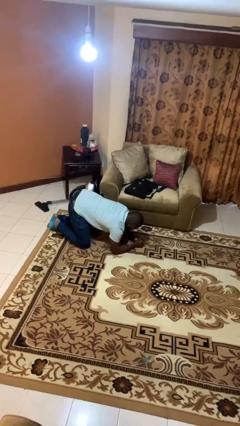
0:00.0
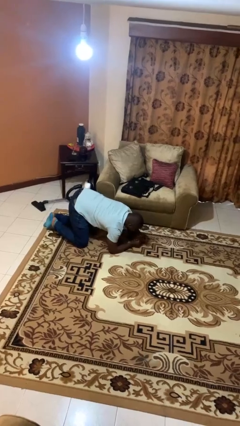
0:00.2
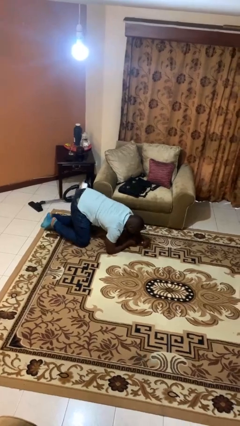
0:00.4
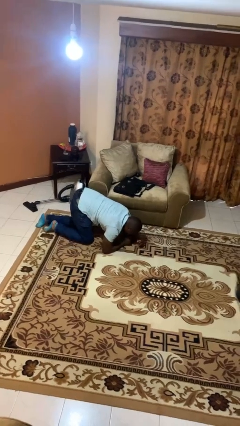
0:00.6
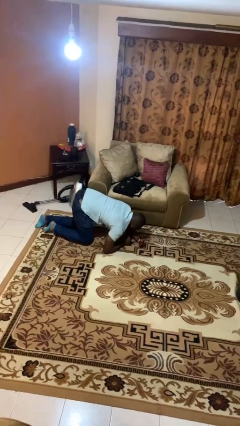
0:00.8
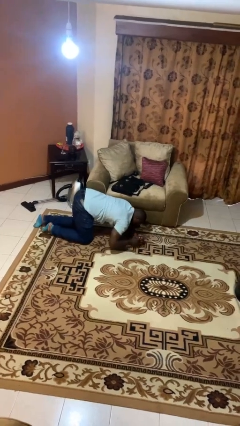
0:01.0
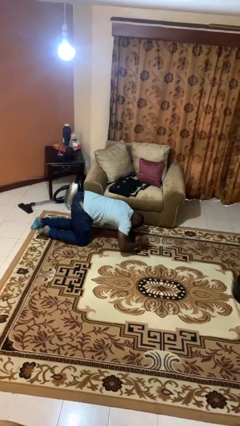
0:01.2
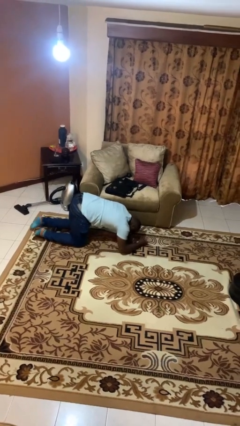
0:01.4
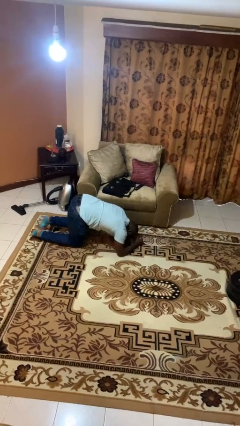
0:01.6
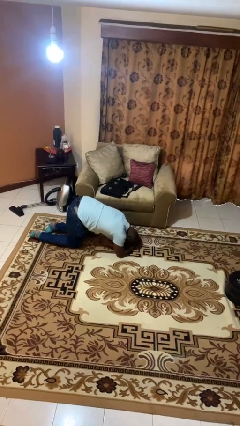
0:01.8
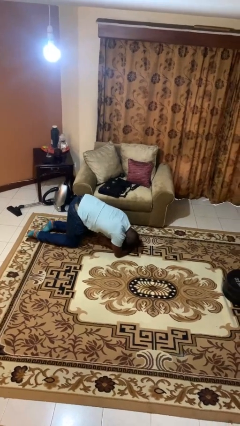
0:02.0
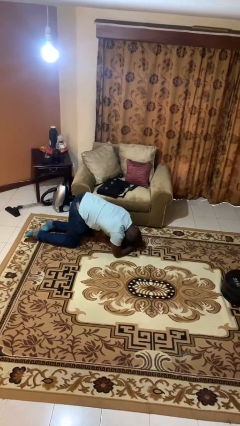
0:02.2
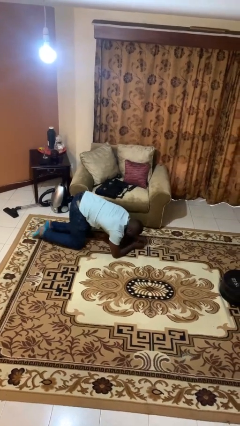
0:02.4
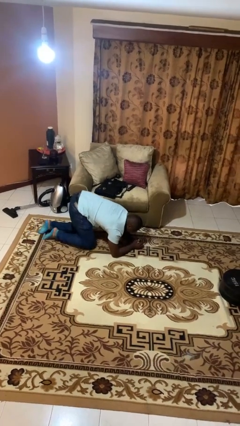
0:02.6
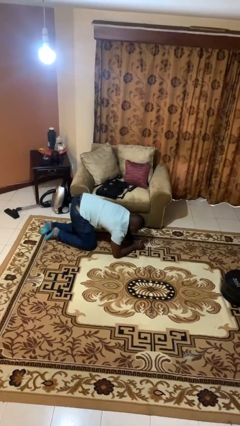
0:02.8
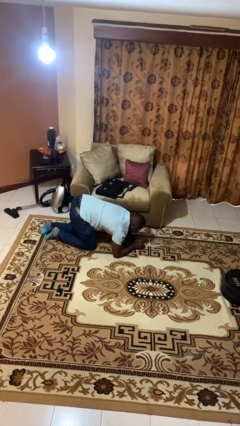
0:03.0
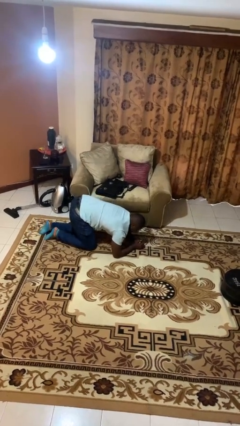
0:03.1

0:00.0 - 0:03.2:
person crawls

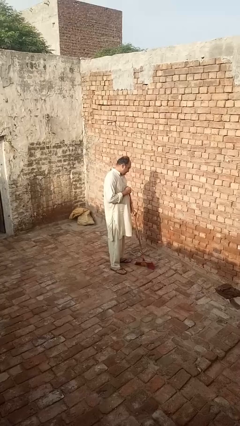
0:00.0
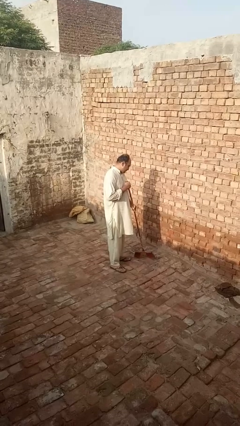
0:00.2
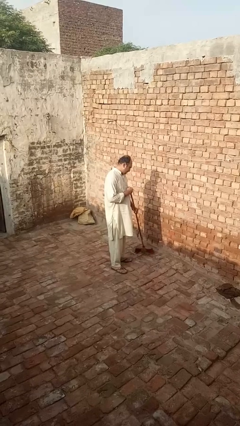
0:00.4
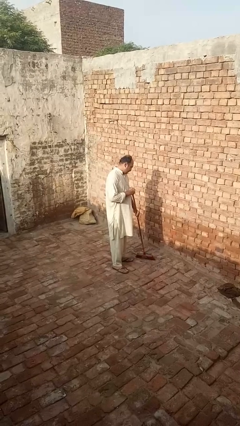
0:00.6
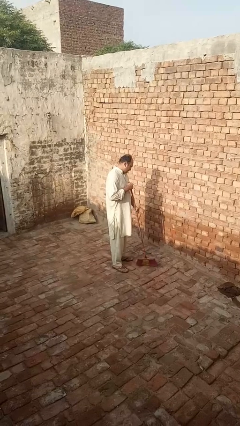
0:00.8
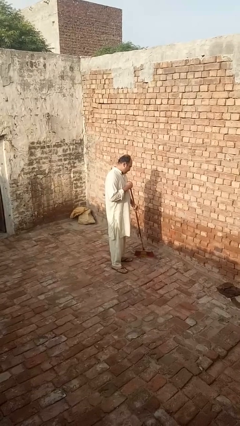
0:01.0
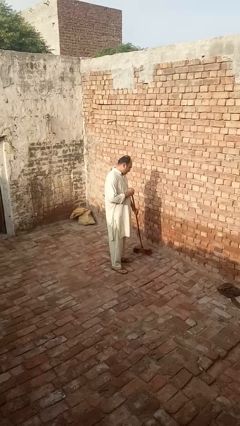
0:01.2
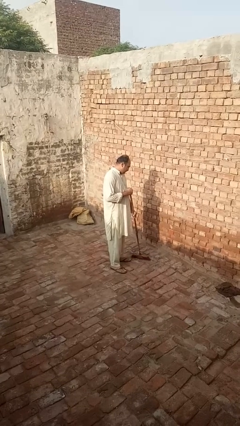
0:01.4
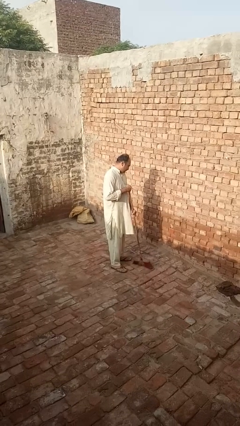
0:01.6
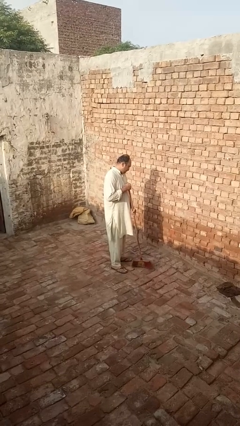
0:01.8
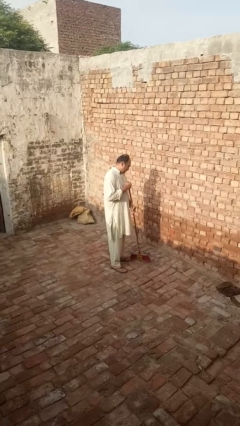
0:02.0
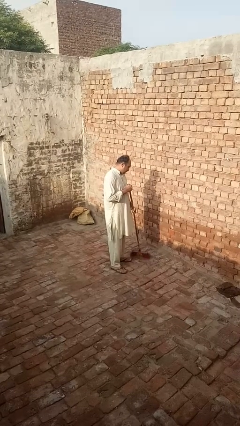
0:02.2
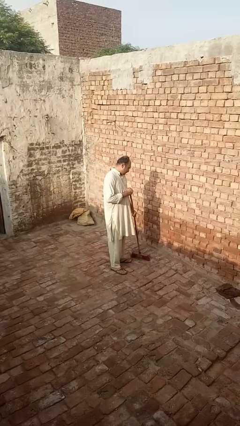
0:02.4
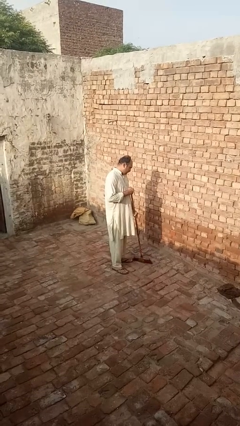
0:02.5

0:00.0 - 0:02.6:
person sweeps floor

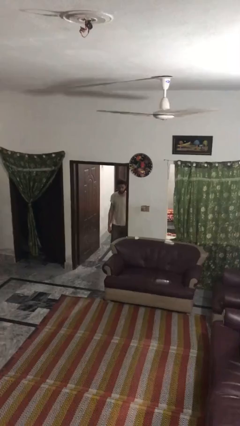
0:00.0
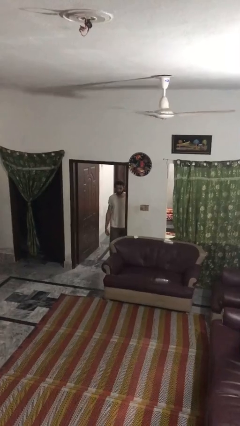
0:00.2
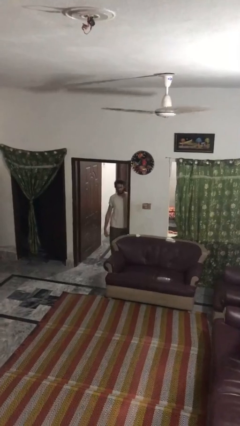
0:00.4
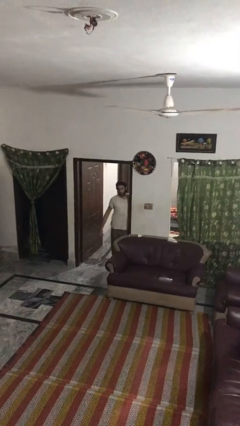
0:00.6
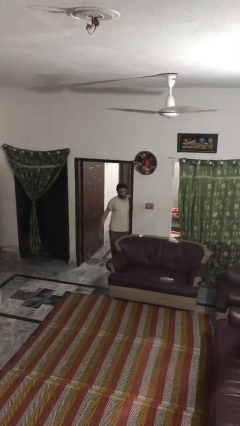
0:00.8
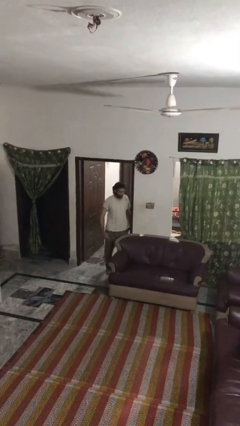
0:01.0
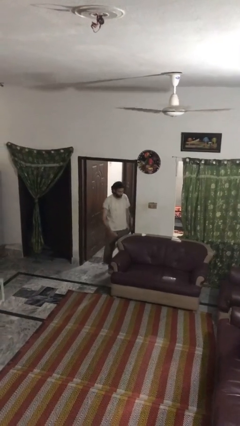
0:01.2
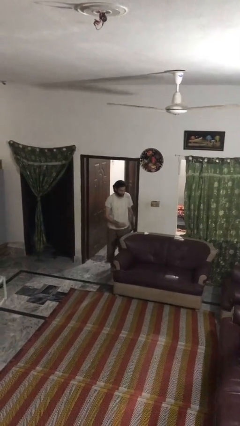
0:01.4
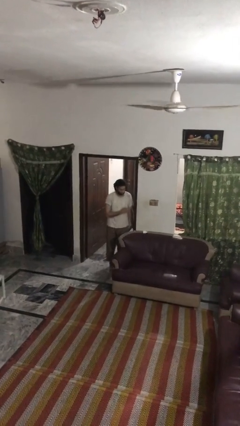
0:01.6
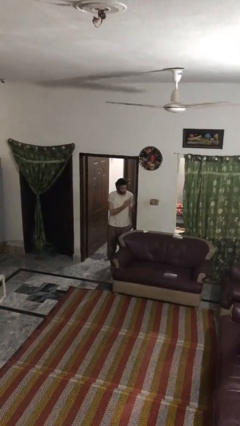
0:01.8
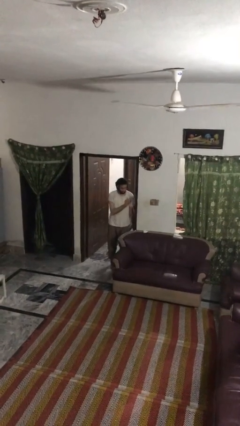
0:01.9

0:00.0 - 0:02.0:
person bumps into wall

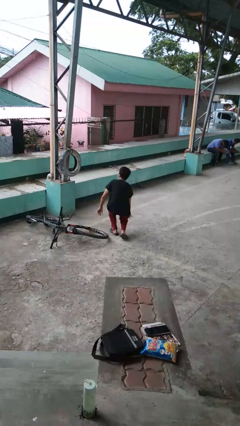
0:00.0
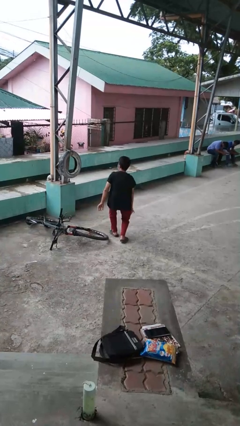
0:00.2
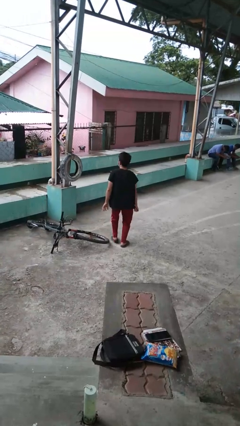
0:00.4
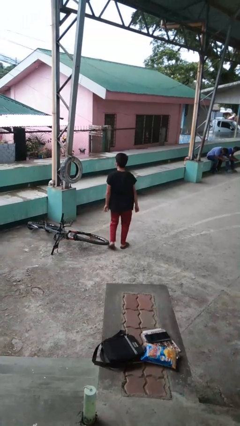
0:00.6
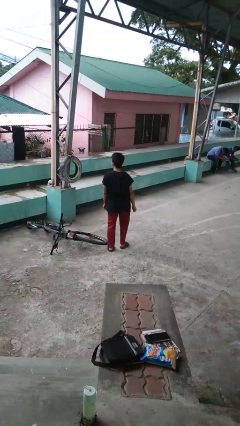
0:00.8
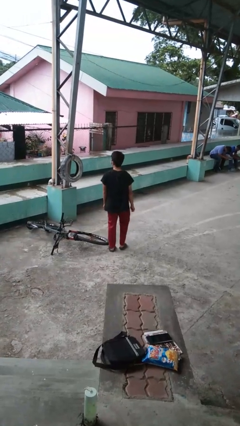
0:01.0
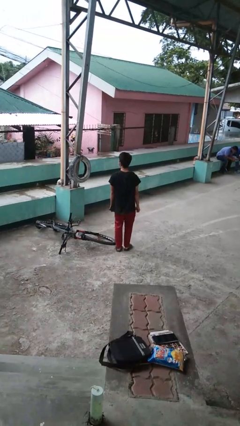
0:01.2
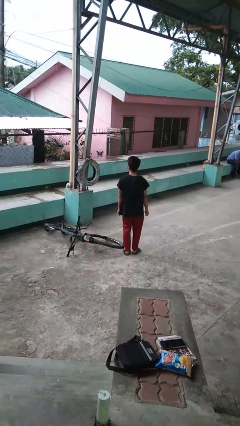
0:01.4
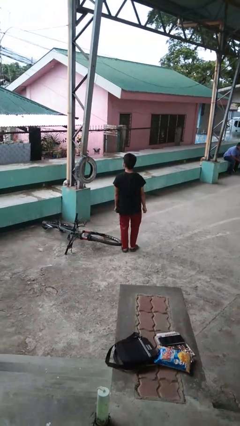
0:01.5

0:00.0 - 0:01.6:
person stands up from floor

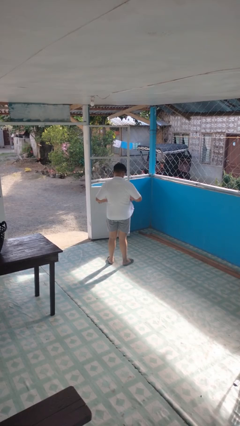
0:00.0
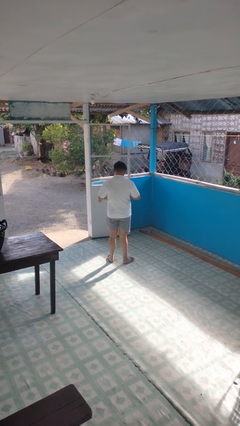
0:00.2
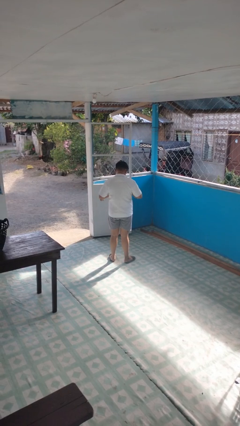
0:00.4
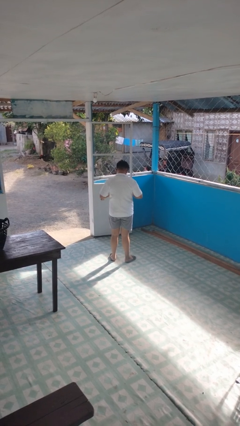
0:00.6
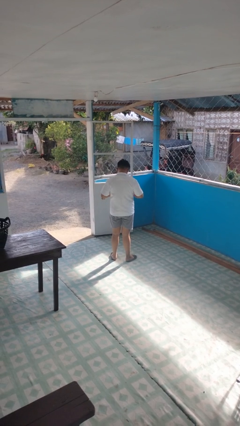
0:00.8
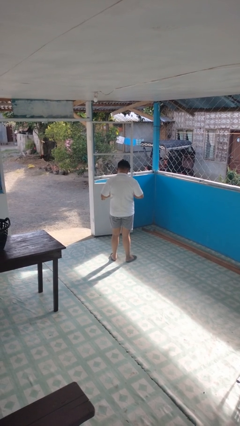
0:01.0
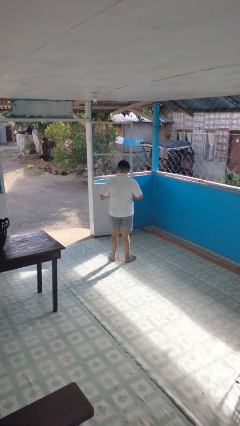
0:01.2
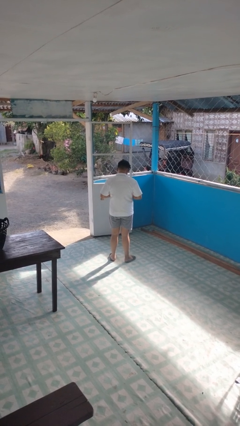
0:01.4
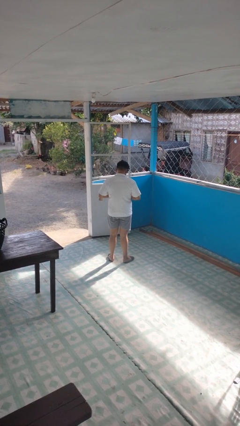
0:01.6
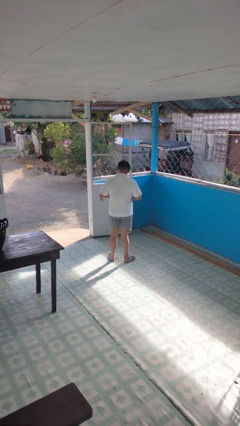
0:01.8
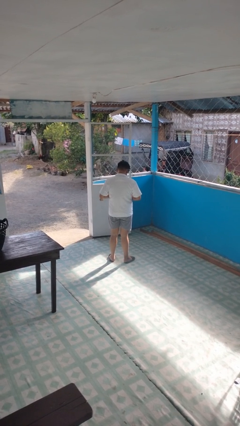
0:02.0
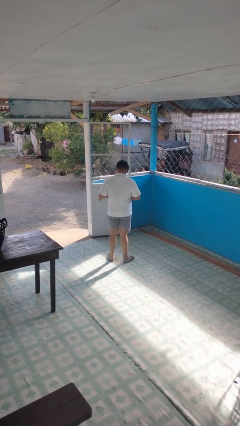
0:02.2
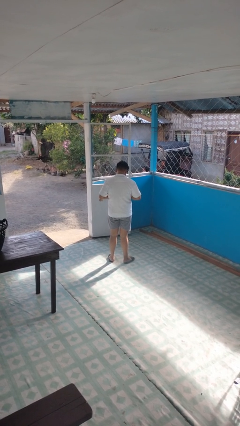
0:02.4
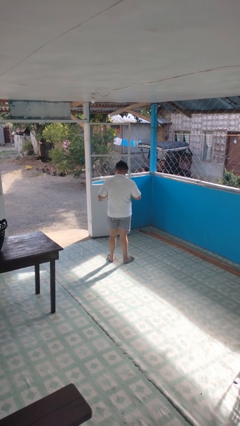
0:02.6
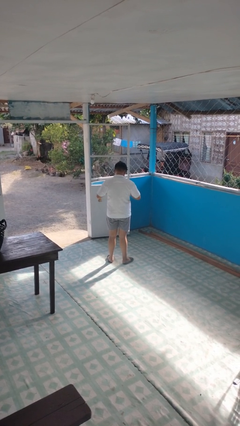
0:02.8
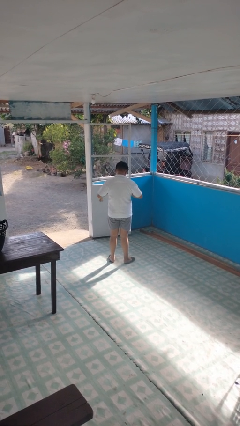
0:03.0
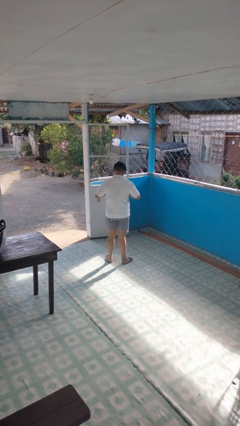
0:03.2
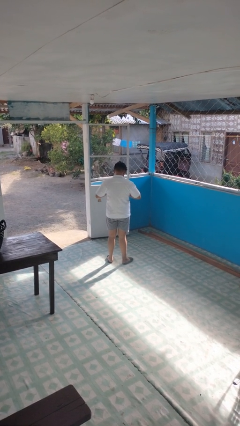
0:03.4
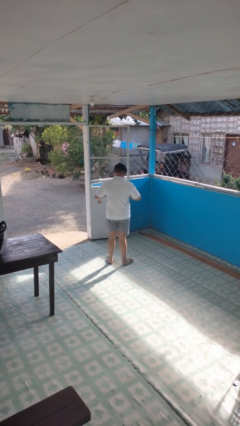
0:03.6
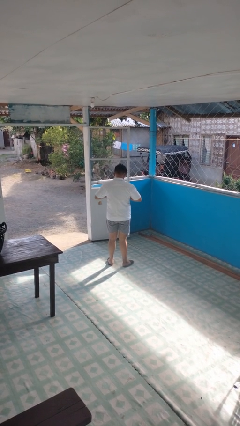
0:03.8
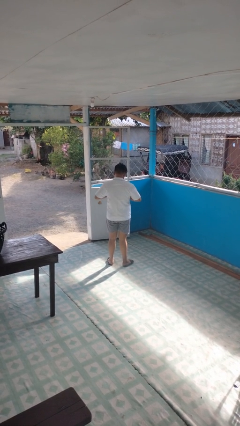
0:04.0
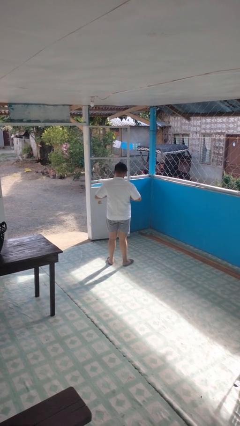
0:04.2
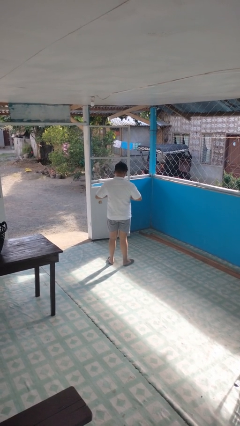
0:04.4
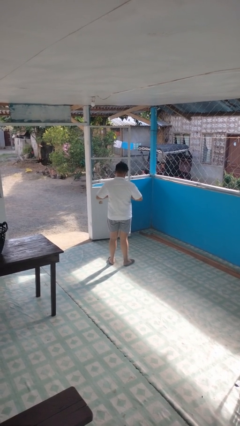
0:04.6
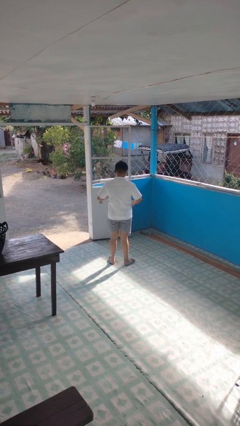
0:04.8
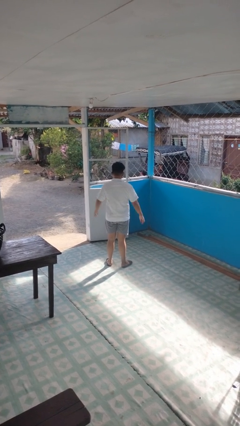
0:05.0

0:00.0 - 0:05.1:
person buttons shirt

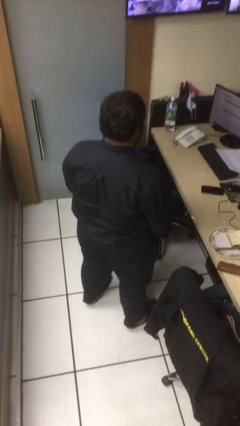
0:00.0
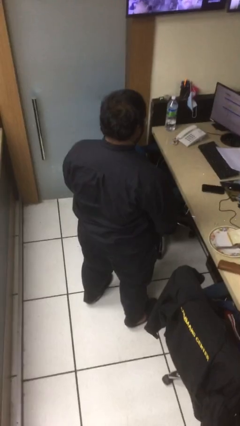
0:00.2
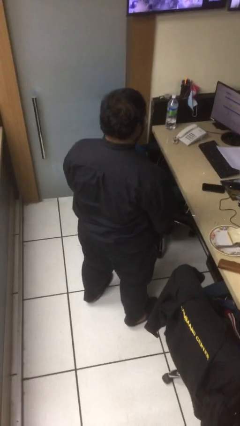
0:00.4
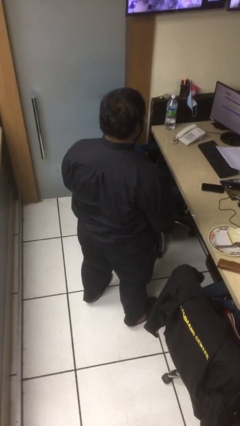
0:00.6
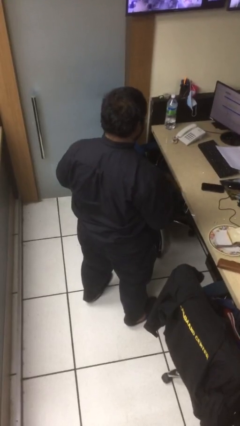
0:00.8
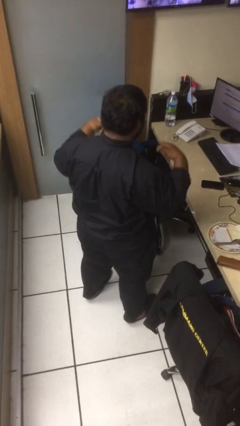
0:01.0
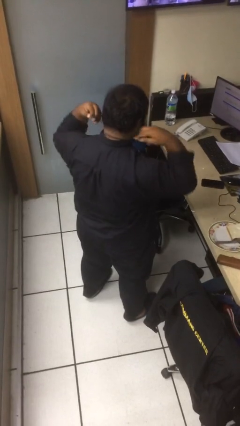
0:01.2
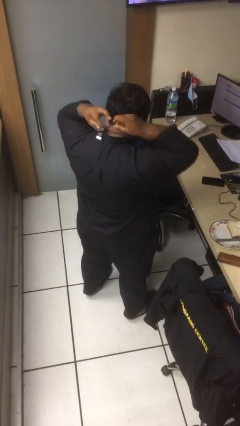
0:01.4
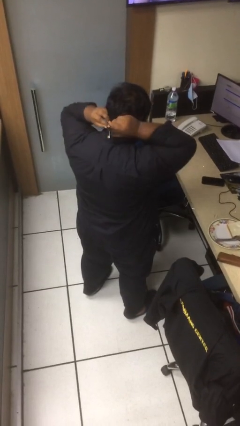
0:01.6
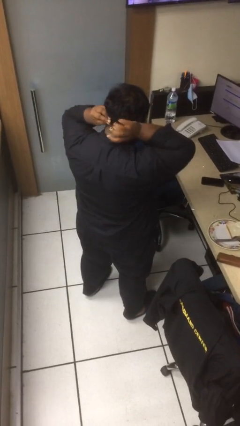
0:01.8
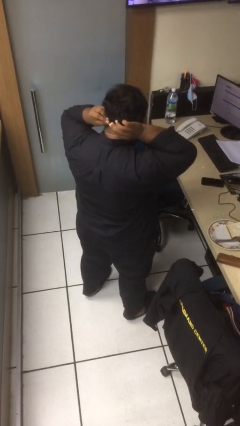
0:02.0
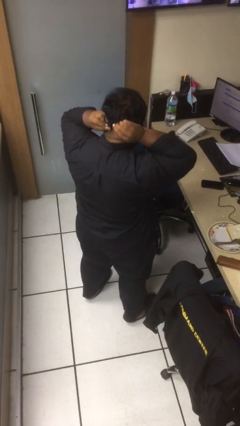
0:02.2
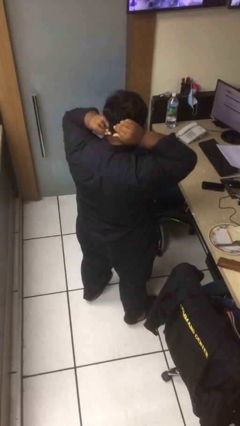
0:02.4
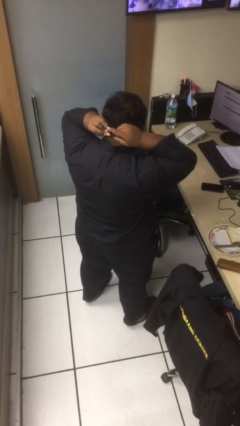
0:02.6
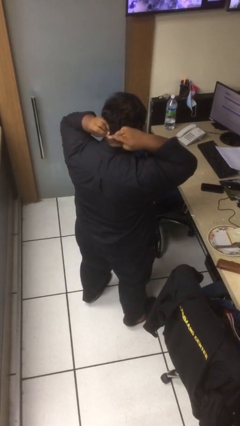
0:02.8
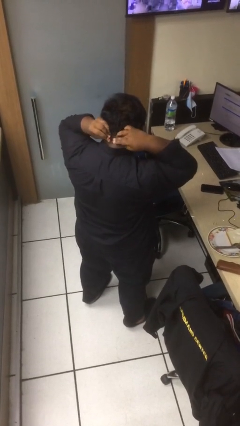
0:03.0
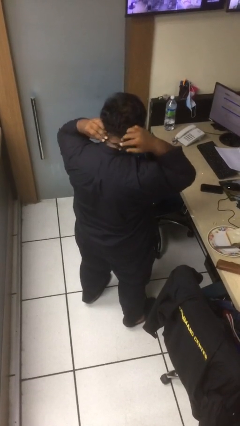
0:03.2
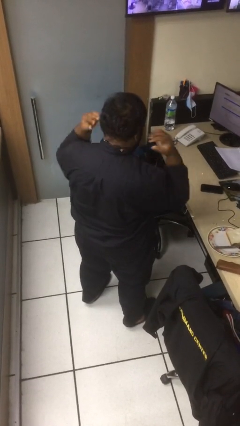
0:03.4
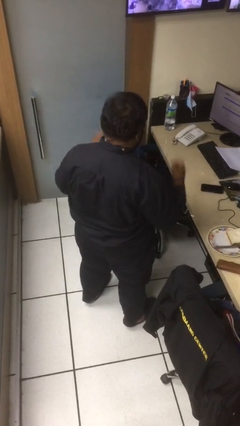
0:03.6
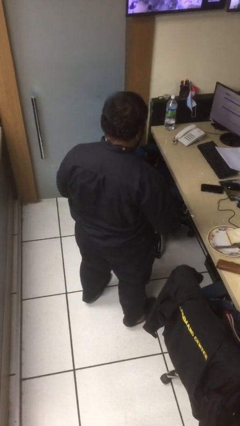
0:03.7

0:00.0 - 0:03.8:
person puts on necklace
